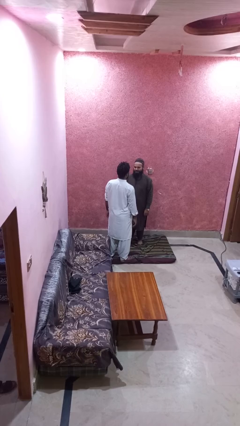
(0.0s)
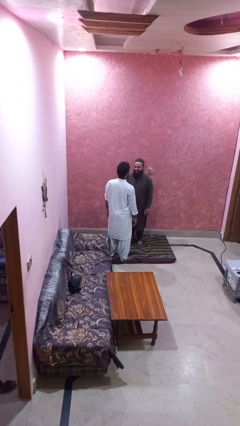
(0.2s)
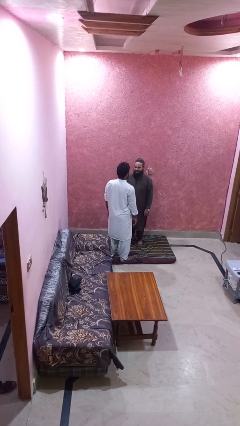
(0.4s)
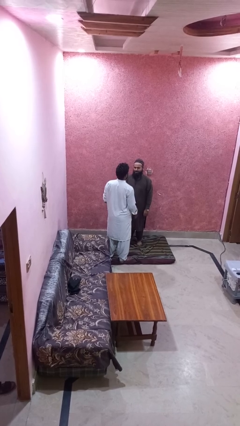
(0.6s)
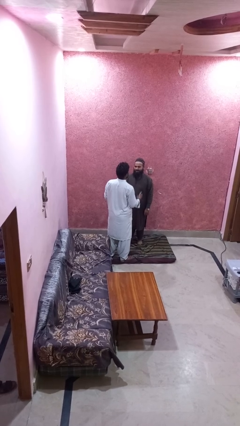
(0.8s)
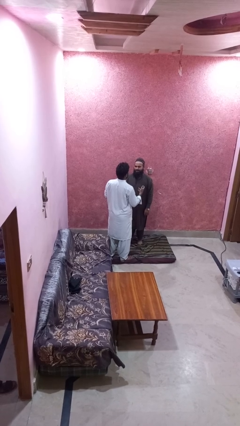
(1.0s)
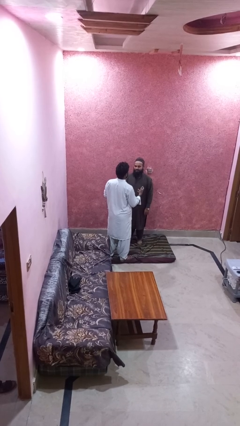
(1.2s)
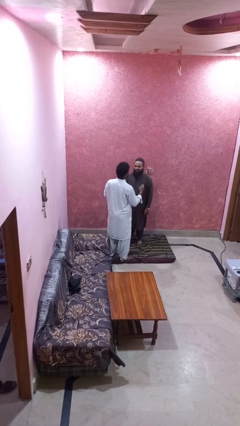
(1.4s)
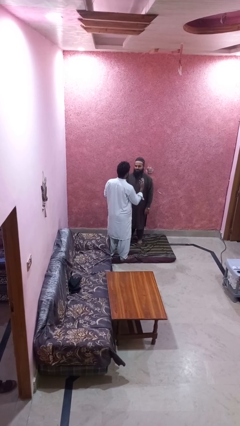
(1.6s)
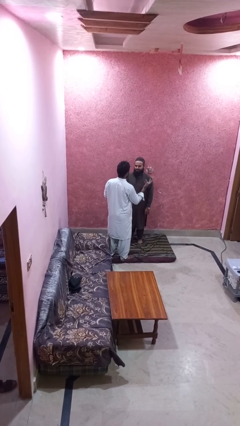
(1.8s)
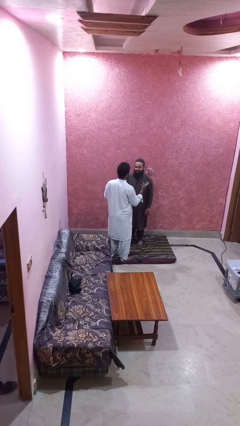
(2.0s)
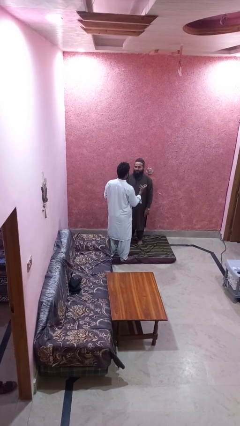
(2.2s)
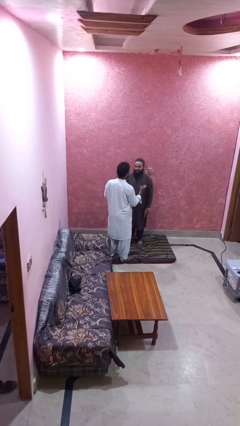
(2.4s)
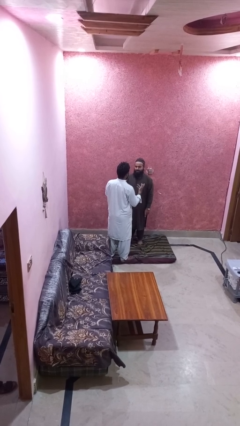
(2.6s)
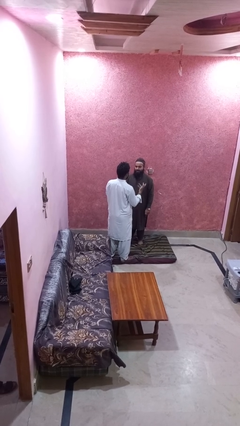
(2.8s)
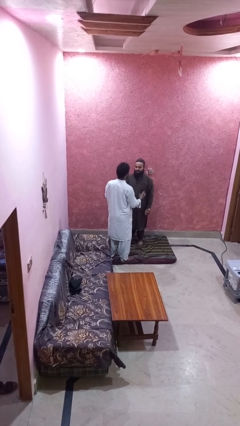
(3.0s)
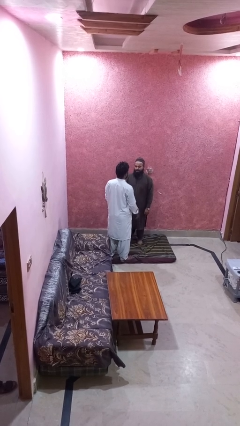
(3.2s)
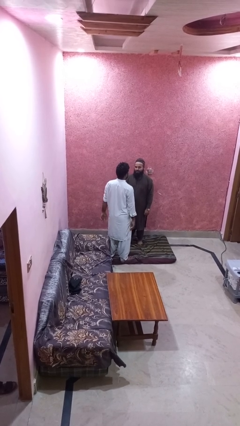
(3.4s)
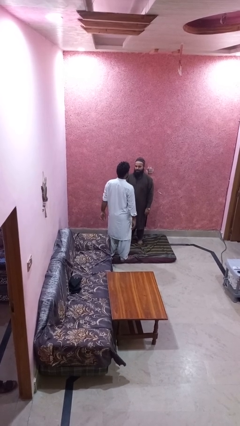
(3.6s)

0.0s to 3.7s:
person laughs with person

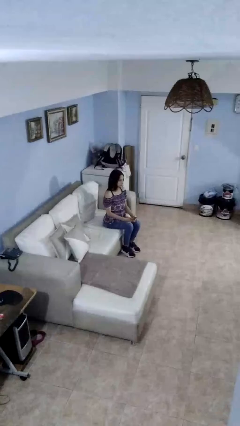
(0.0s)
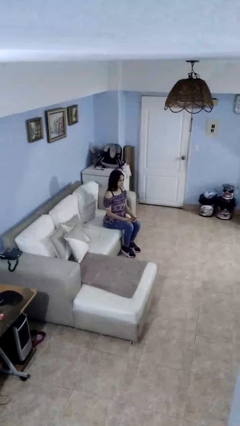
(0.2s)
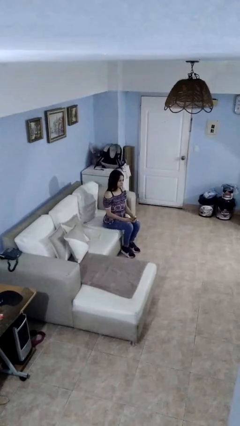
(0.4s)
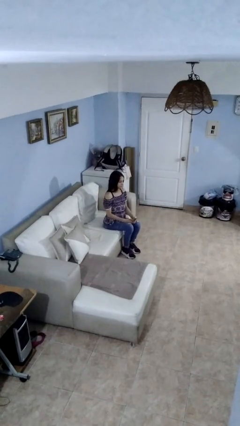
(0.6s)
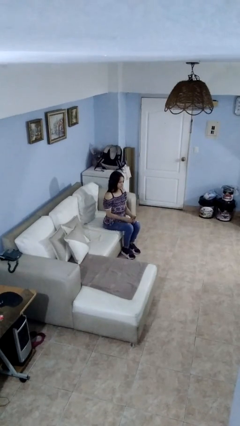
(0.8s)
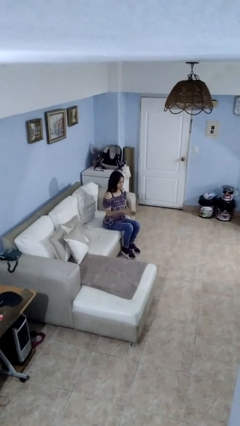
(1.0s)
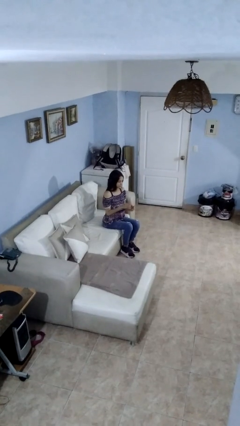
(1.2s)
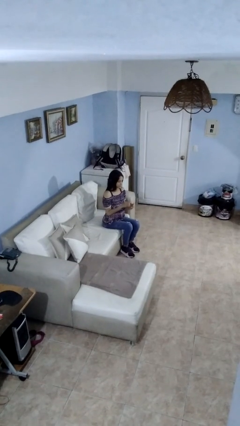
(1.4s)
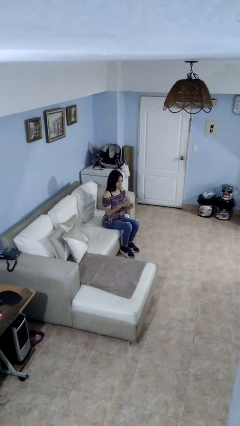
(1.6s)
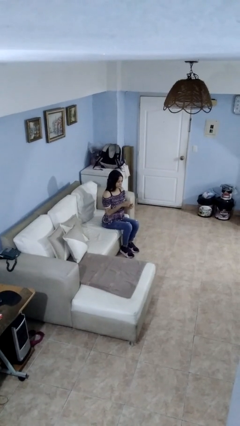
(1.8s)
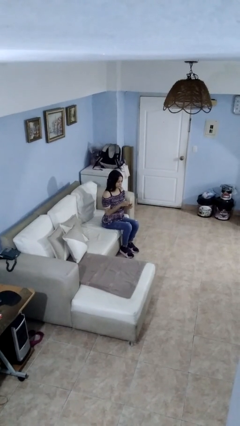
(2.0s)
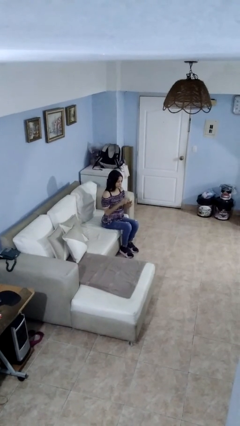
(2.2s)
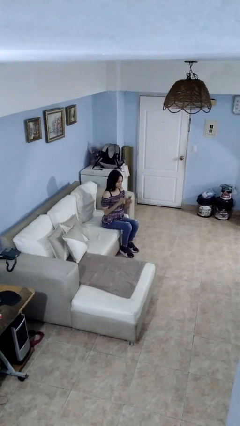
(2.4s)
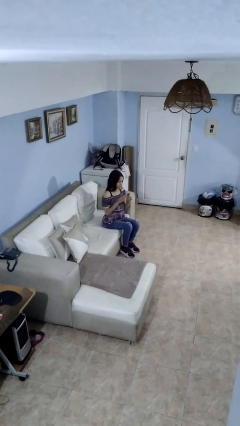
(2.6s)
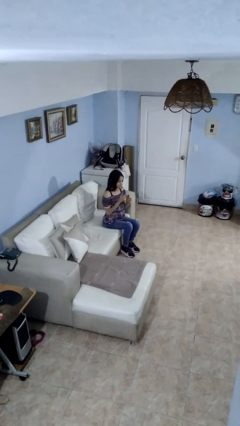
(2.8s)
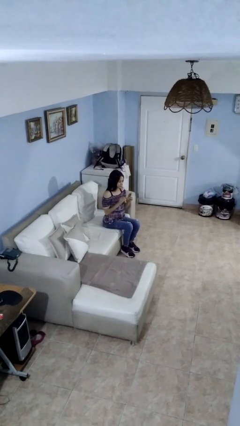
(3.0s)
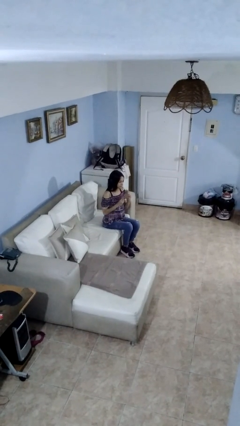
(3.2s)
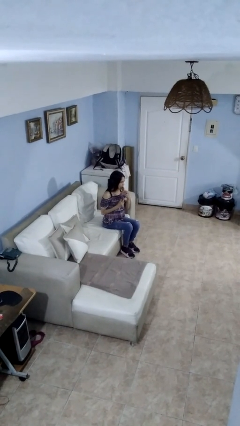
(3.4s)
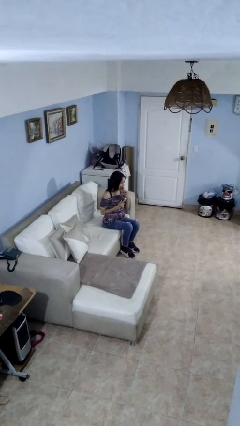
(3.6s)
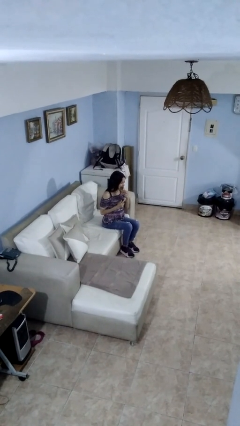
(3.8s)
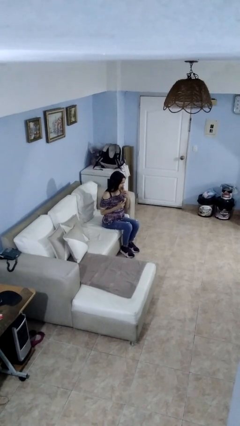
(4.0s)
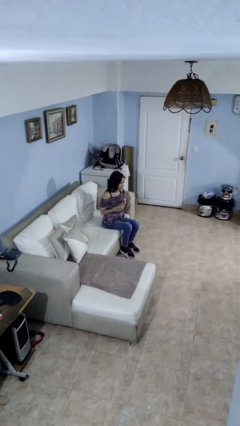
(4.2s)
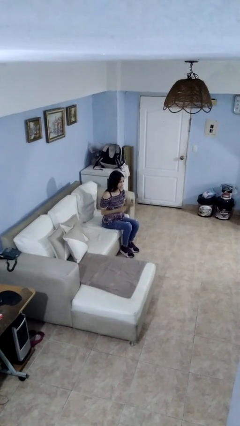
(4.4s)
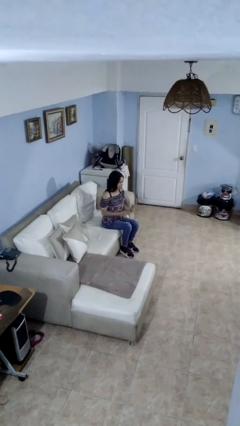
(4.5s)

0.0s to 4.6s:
person eats banana

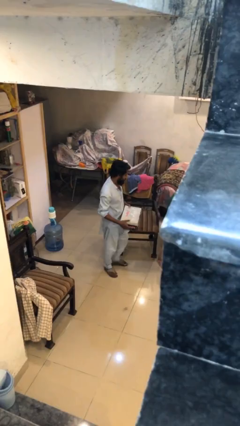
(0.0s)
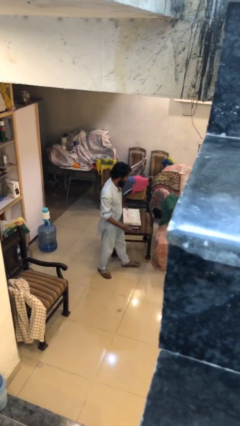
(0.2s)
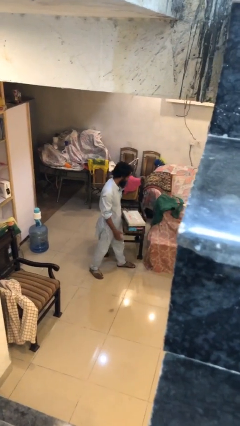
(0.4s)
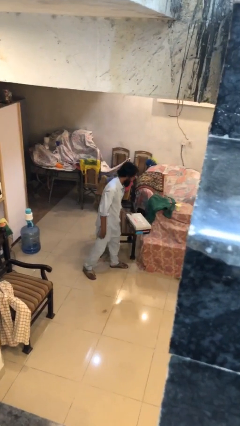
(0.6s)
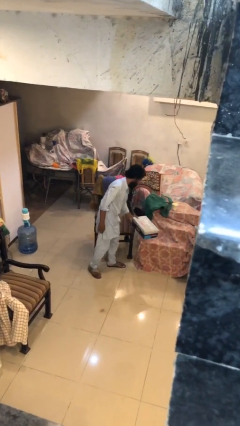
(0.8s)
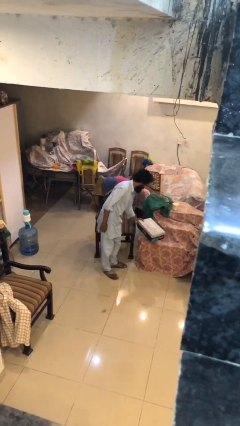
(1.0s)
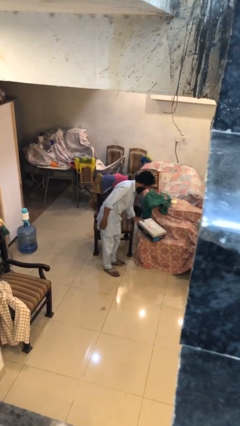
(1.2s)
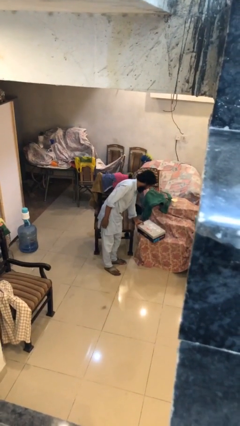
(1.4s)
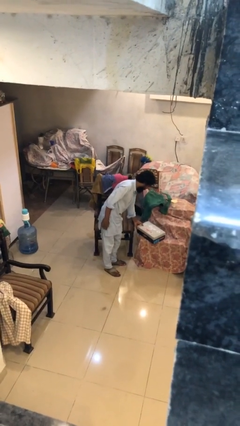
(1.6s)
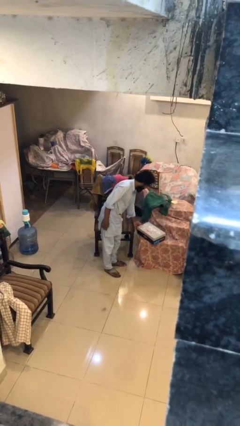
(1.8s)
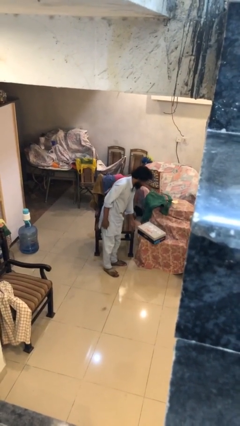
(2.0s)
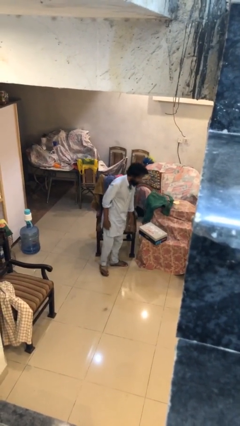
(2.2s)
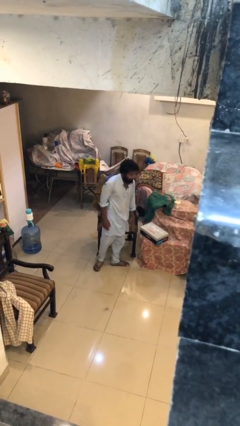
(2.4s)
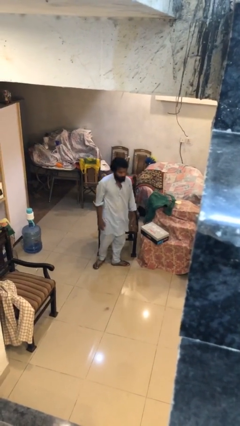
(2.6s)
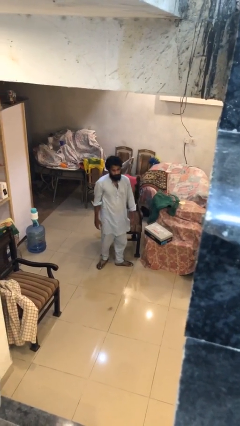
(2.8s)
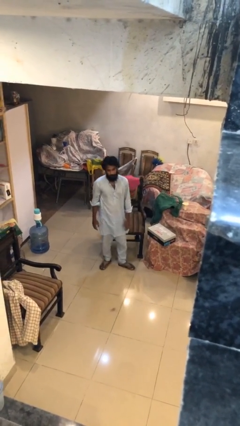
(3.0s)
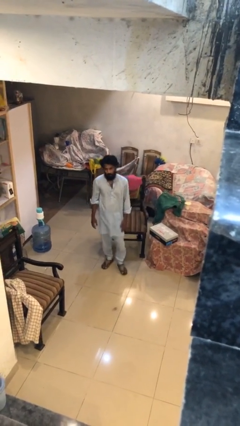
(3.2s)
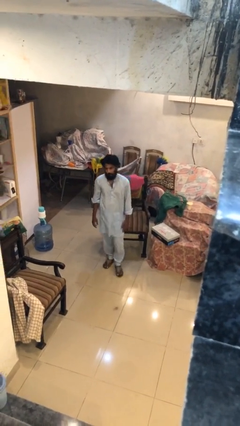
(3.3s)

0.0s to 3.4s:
person puts down object on table

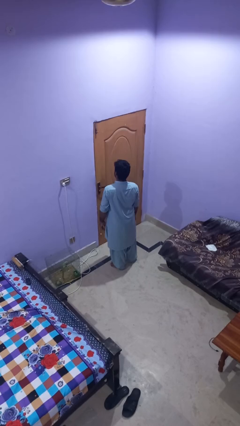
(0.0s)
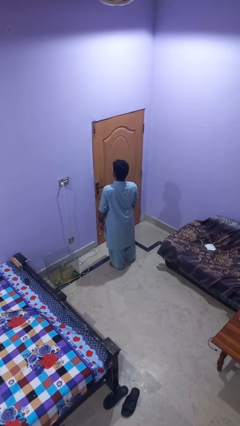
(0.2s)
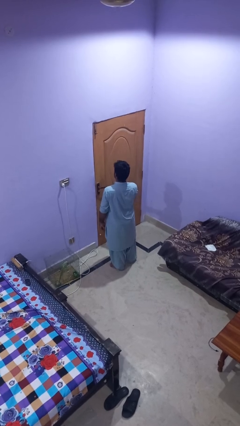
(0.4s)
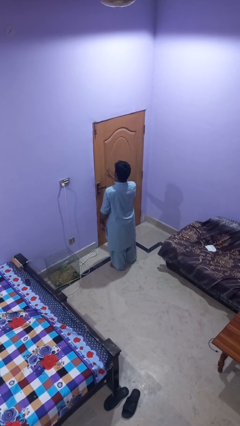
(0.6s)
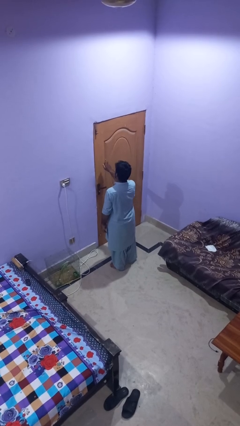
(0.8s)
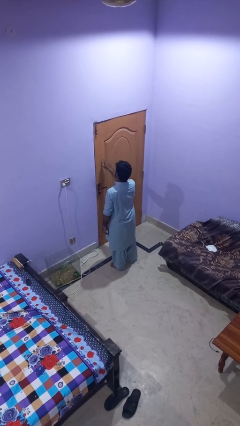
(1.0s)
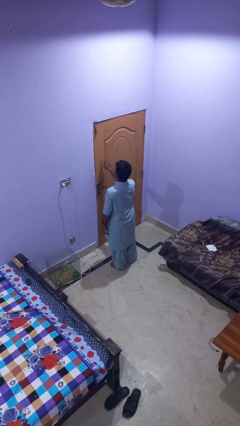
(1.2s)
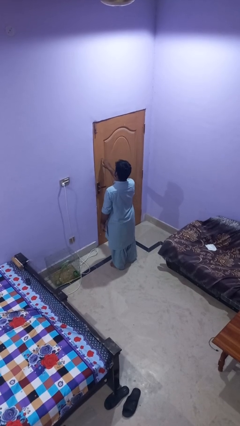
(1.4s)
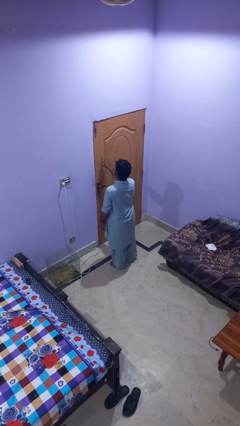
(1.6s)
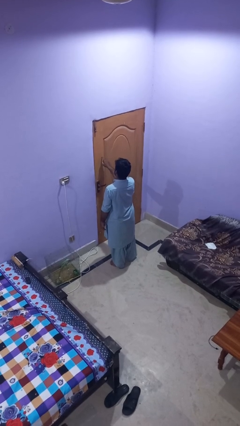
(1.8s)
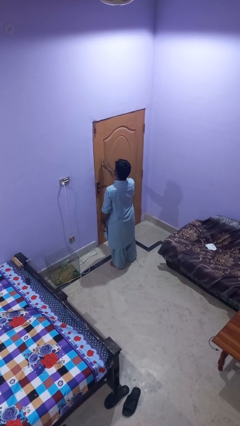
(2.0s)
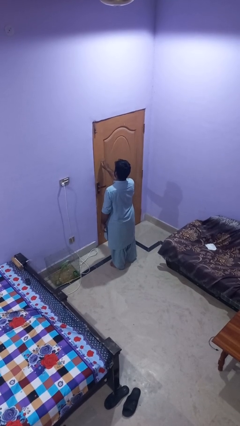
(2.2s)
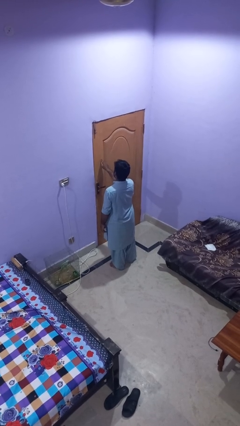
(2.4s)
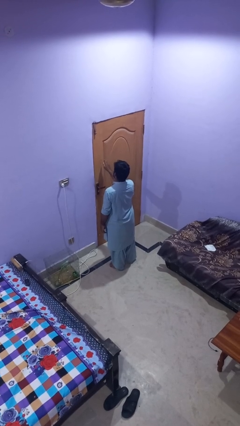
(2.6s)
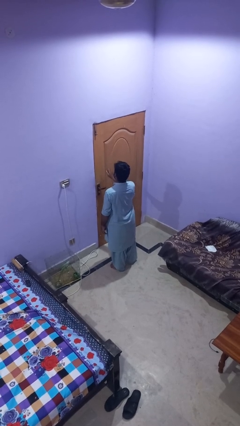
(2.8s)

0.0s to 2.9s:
person taps object with finger

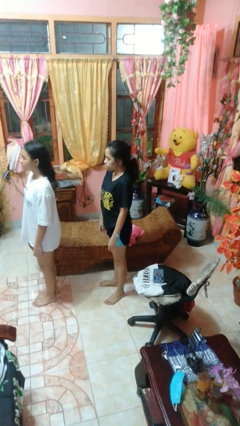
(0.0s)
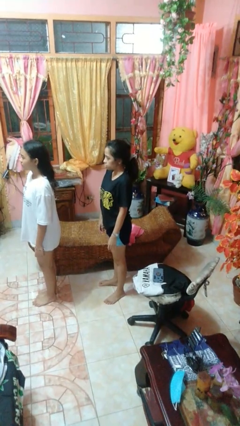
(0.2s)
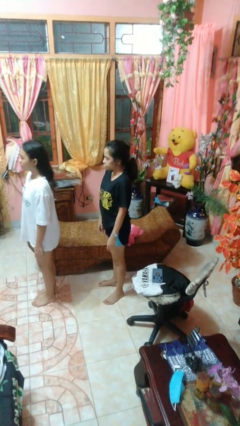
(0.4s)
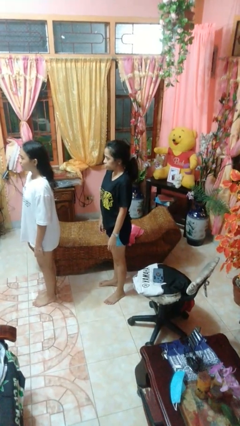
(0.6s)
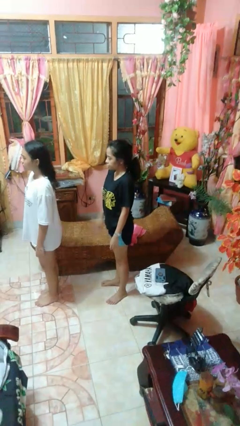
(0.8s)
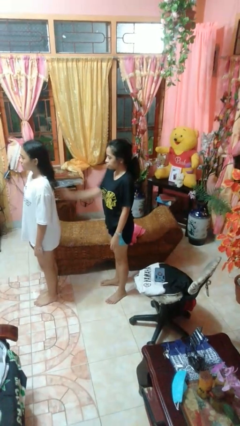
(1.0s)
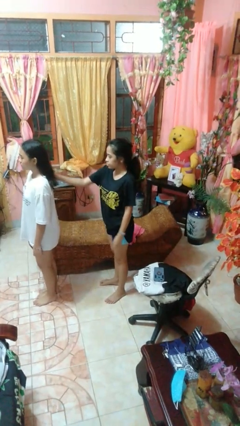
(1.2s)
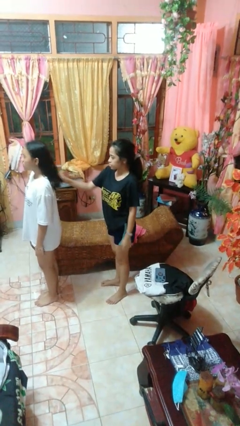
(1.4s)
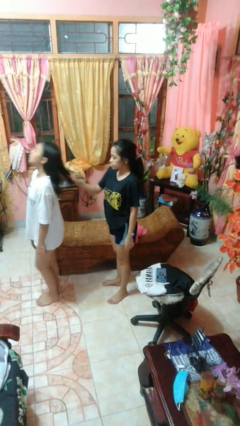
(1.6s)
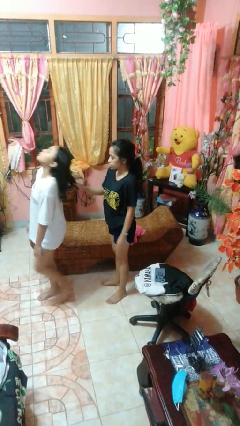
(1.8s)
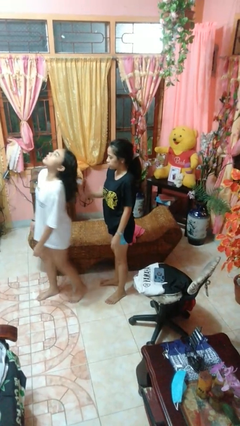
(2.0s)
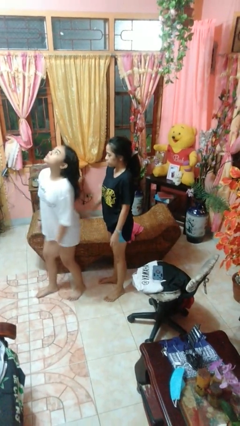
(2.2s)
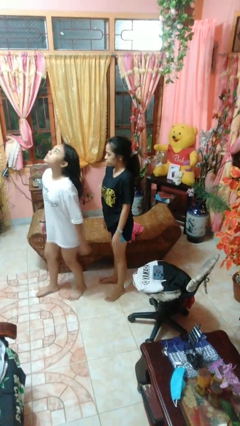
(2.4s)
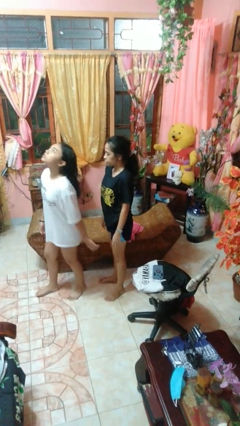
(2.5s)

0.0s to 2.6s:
person grabs person by hair

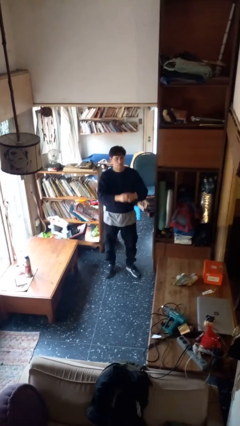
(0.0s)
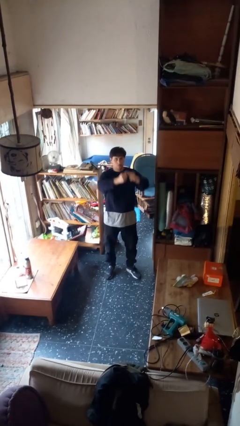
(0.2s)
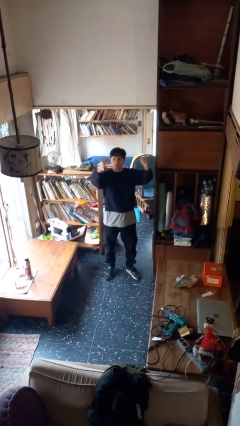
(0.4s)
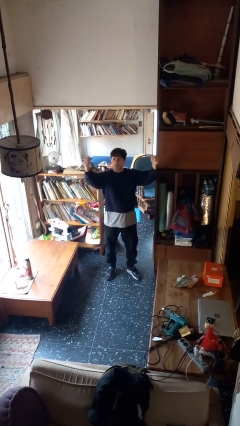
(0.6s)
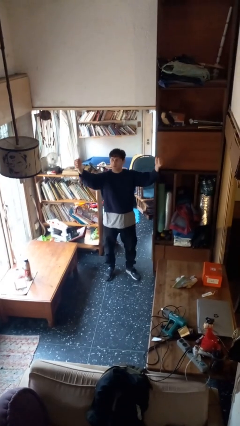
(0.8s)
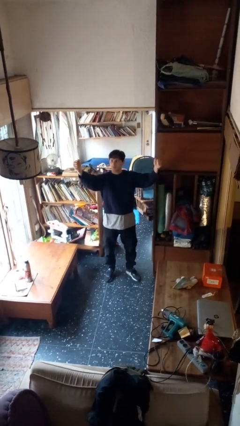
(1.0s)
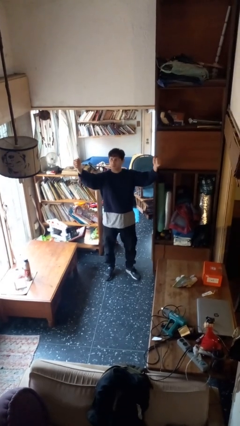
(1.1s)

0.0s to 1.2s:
person gestures zoom in
